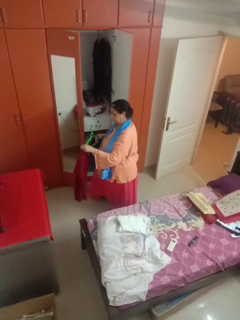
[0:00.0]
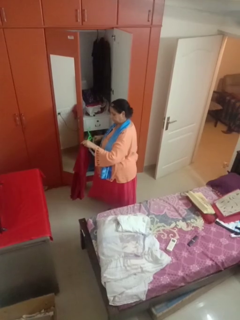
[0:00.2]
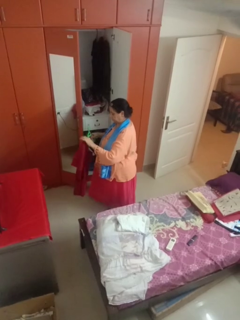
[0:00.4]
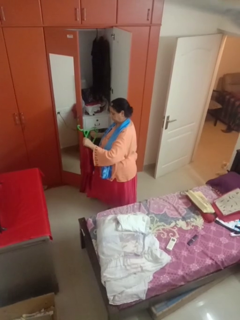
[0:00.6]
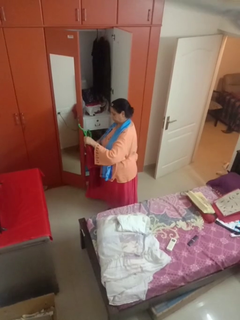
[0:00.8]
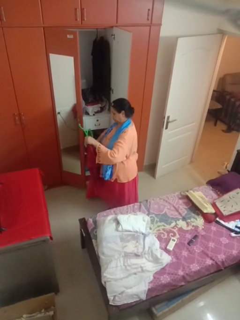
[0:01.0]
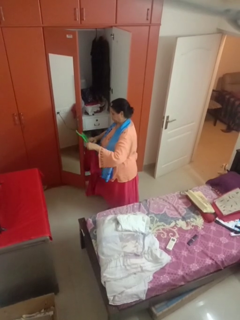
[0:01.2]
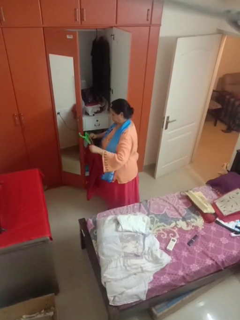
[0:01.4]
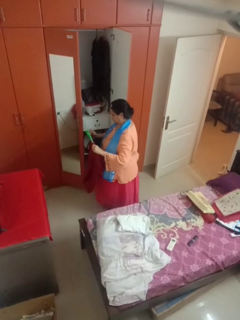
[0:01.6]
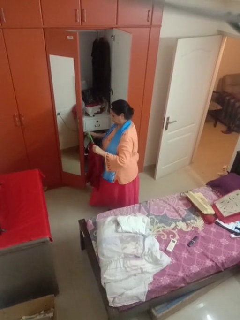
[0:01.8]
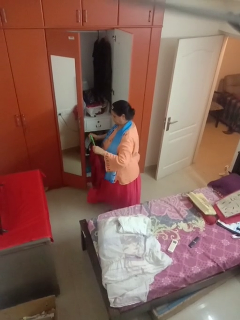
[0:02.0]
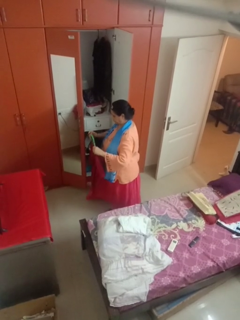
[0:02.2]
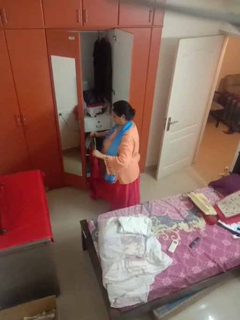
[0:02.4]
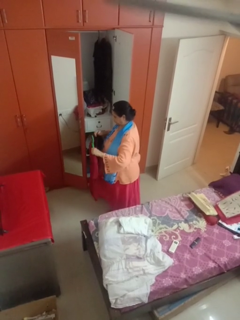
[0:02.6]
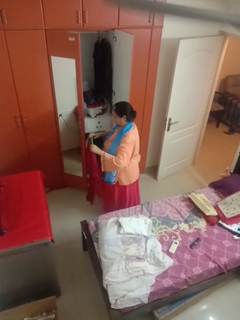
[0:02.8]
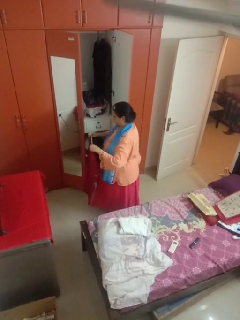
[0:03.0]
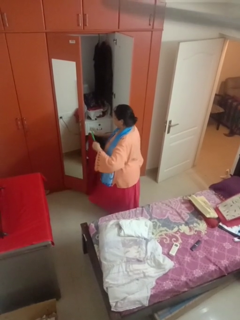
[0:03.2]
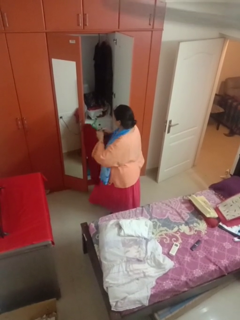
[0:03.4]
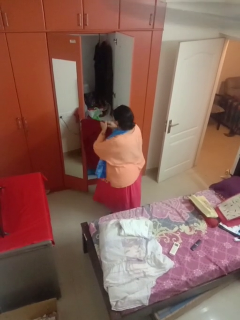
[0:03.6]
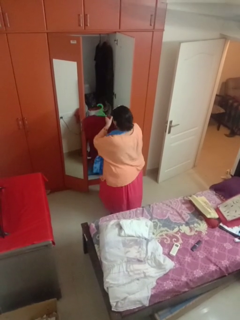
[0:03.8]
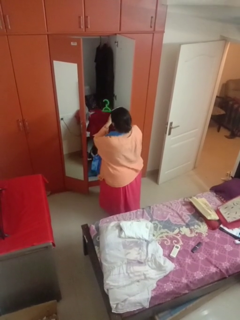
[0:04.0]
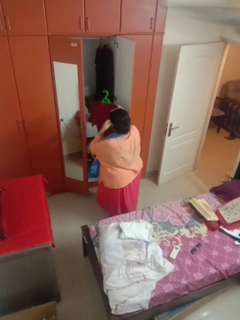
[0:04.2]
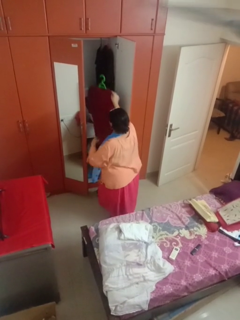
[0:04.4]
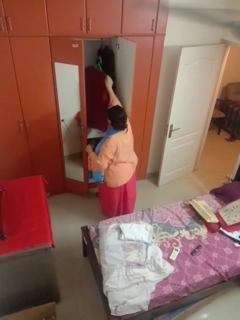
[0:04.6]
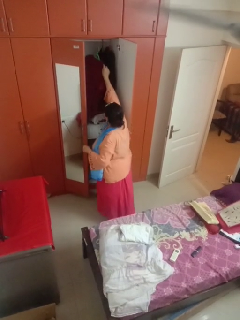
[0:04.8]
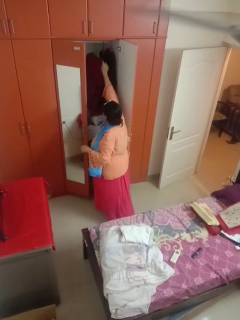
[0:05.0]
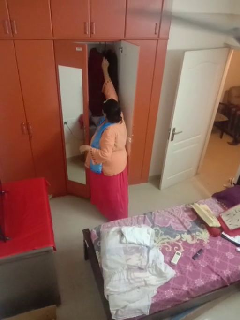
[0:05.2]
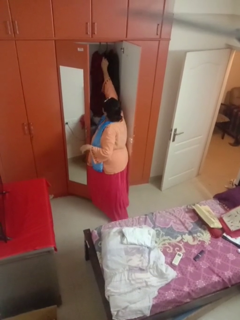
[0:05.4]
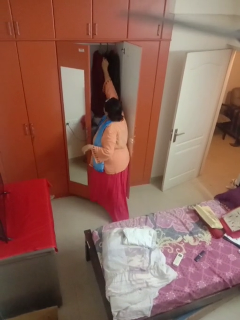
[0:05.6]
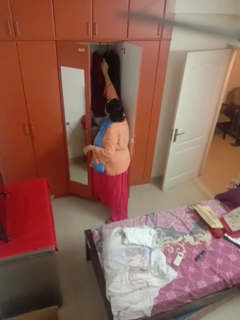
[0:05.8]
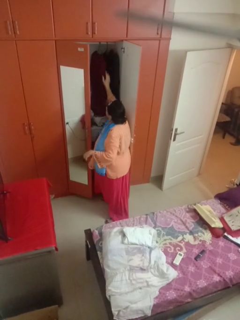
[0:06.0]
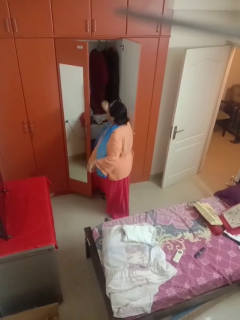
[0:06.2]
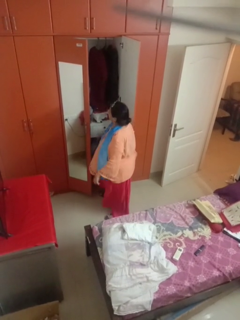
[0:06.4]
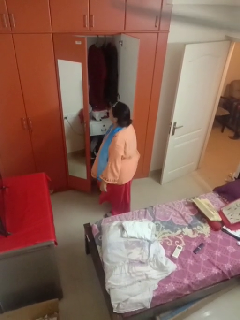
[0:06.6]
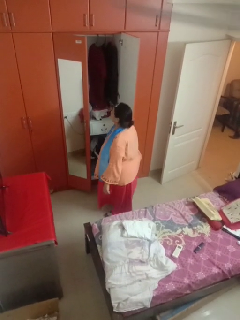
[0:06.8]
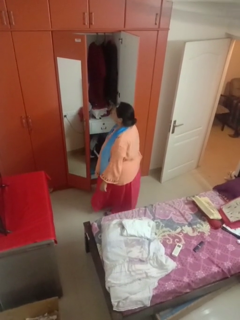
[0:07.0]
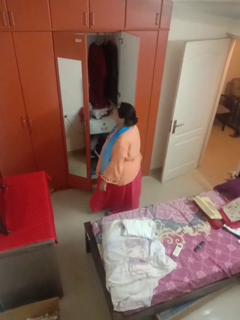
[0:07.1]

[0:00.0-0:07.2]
person puts clothes into closet

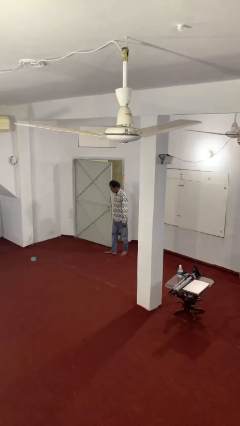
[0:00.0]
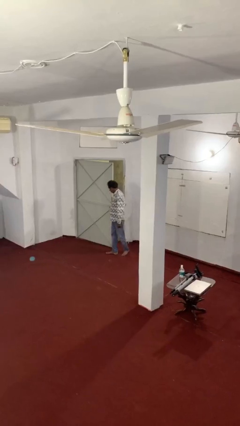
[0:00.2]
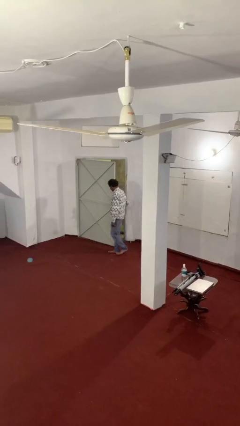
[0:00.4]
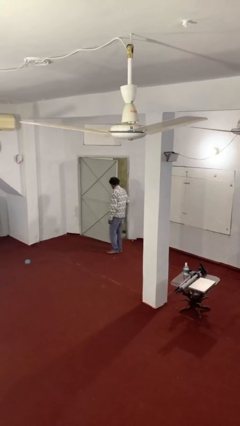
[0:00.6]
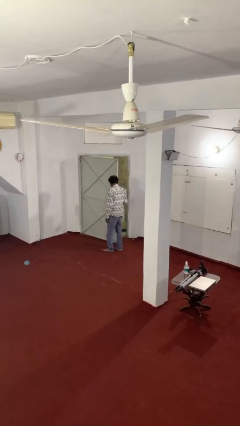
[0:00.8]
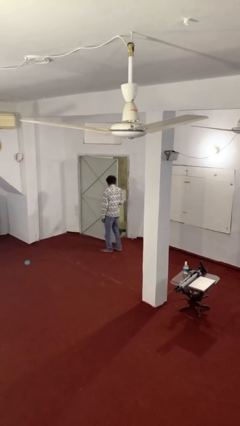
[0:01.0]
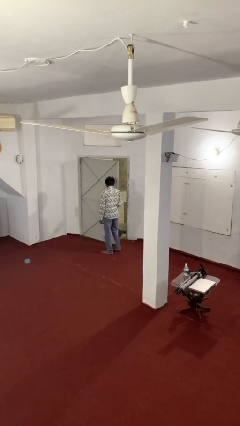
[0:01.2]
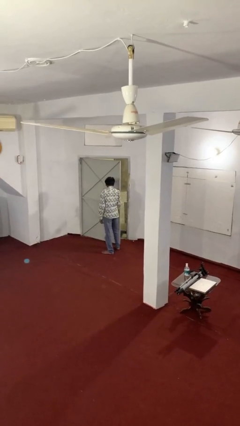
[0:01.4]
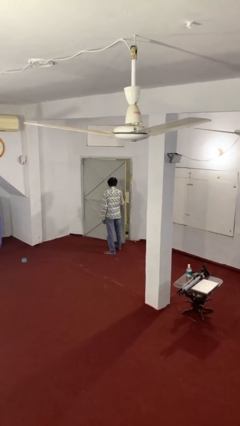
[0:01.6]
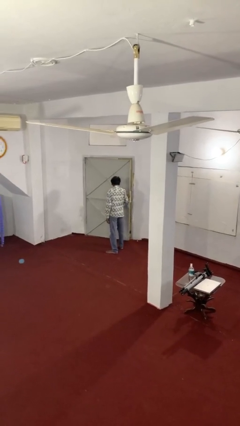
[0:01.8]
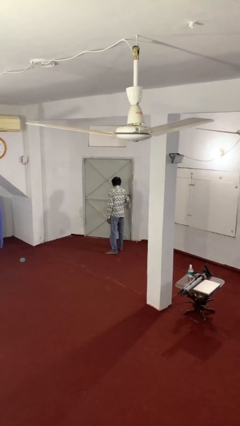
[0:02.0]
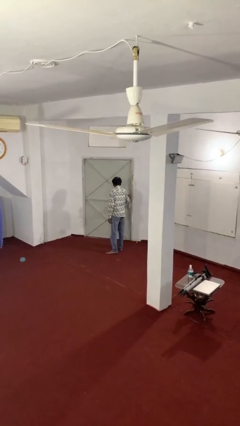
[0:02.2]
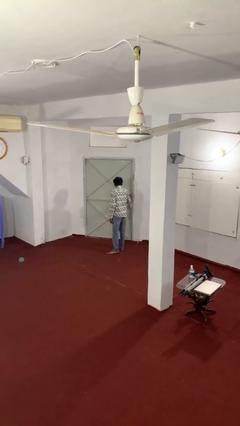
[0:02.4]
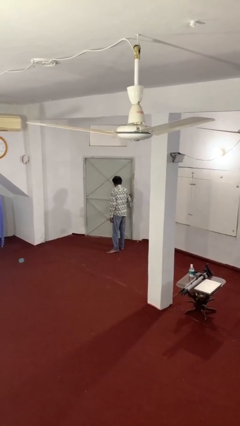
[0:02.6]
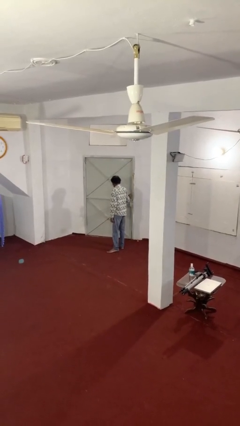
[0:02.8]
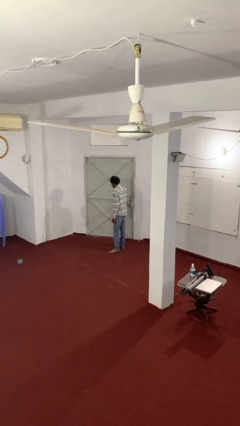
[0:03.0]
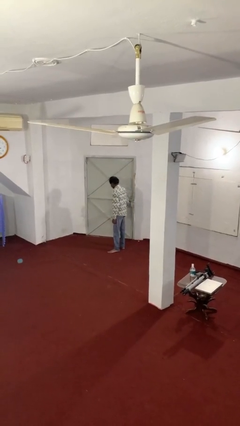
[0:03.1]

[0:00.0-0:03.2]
person closes facility door

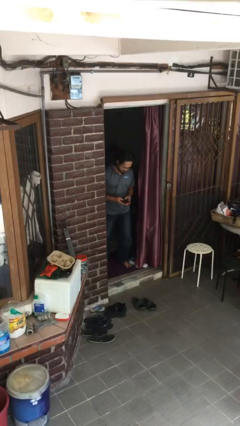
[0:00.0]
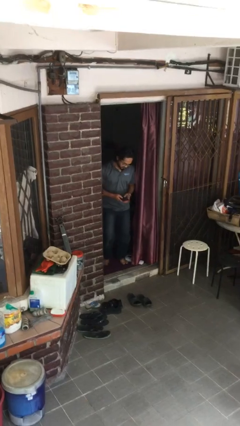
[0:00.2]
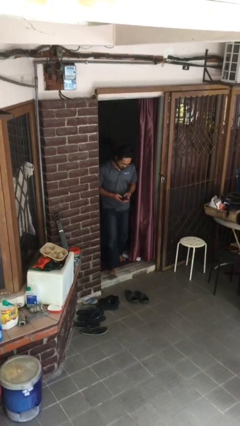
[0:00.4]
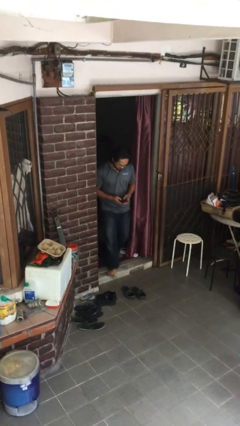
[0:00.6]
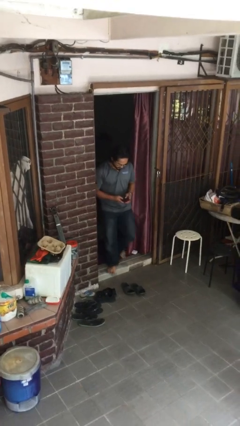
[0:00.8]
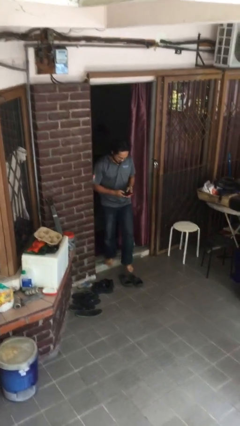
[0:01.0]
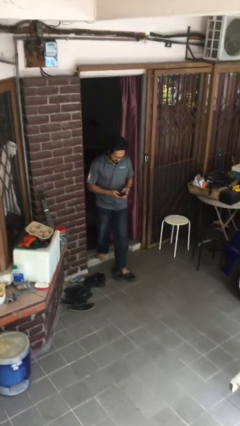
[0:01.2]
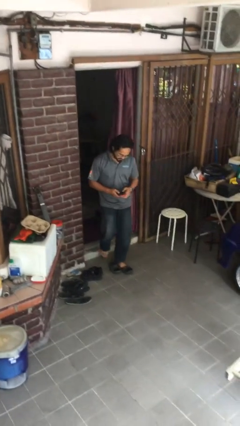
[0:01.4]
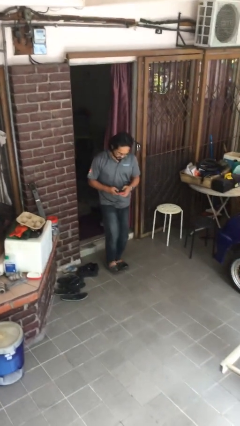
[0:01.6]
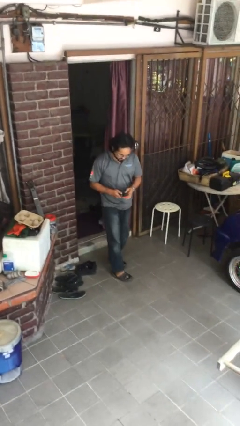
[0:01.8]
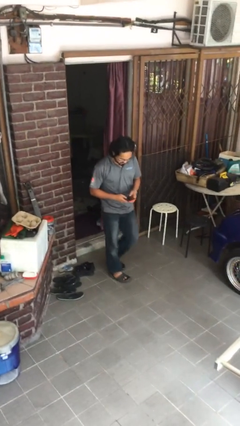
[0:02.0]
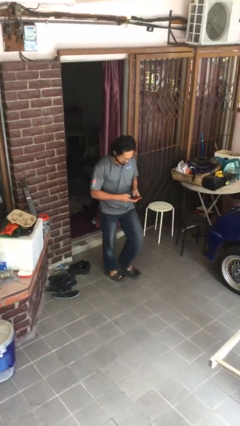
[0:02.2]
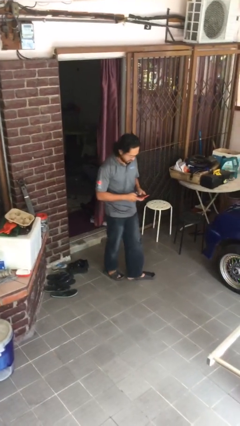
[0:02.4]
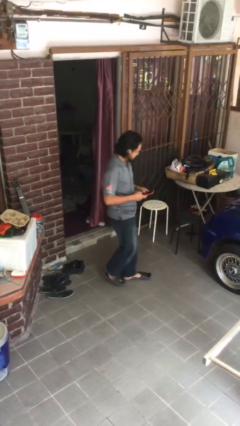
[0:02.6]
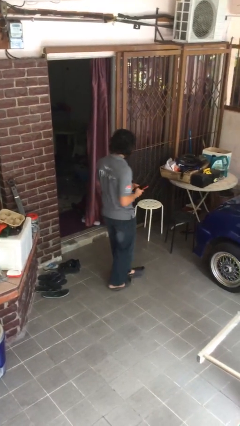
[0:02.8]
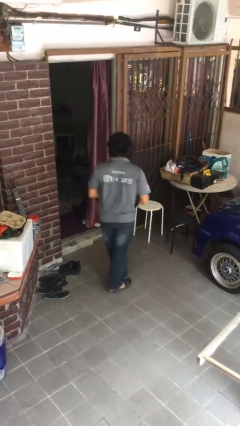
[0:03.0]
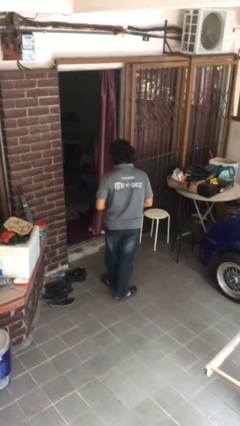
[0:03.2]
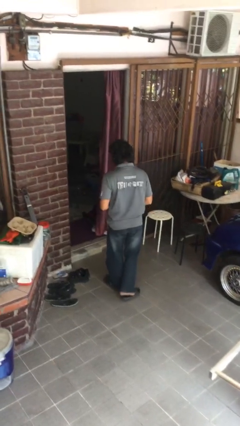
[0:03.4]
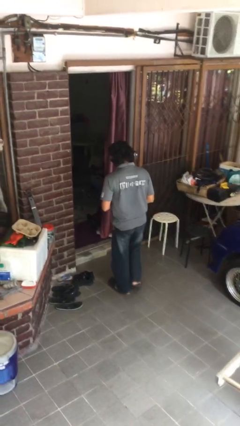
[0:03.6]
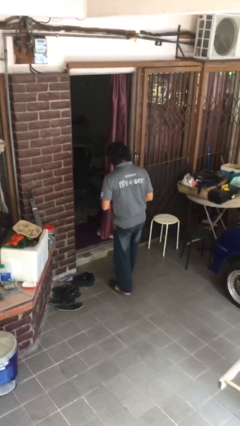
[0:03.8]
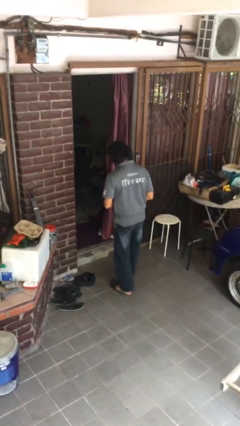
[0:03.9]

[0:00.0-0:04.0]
person enters scene through structure

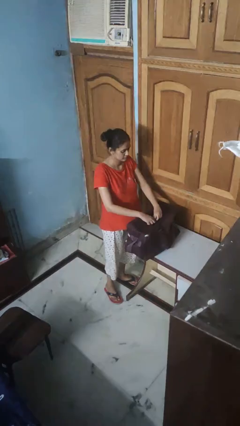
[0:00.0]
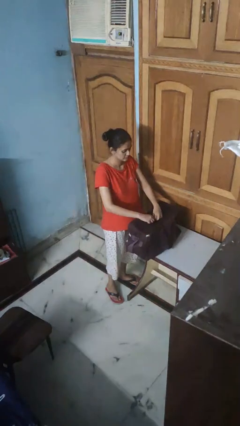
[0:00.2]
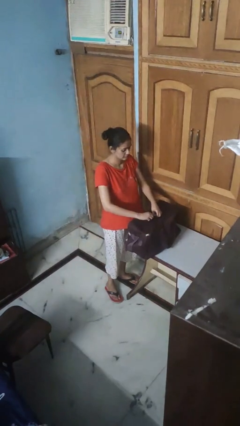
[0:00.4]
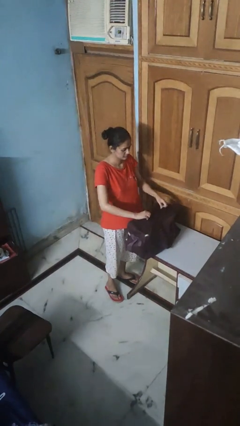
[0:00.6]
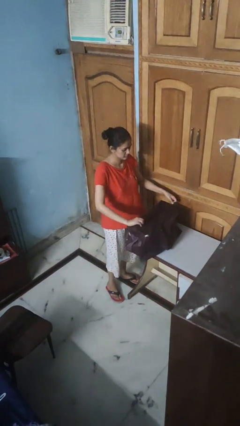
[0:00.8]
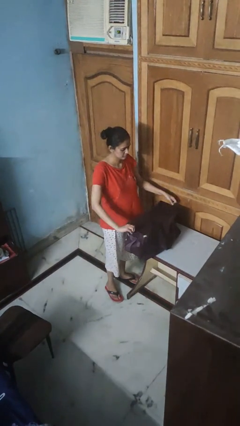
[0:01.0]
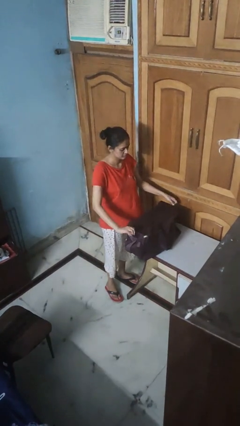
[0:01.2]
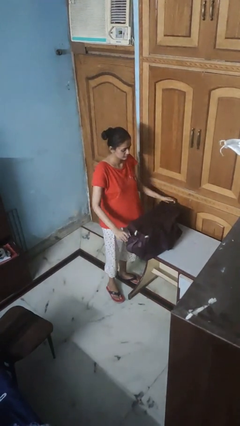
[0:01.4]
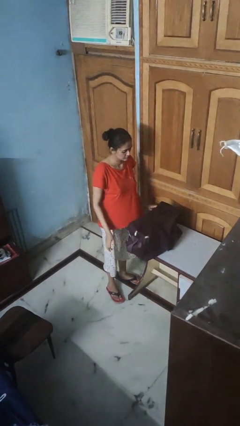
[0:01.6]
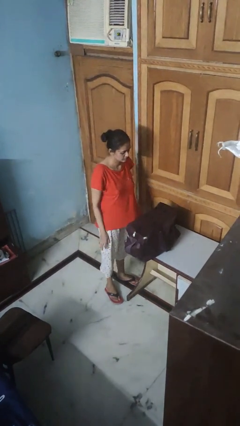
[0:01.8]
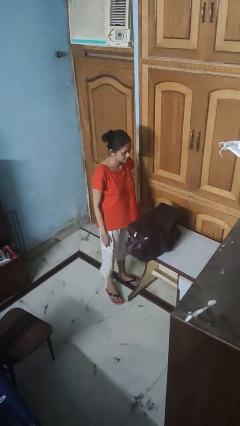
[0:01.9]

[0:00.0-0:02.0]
person opens suitcase

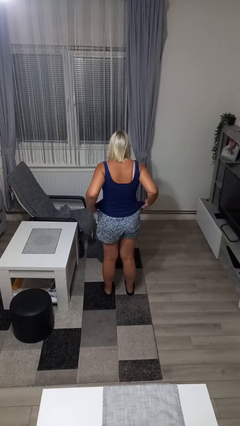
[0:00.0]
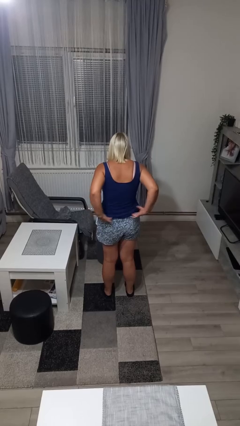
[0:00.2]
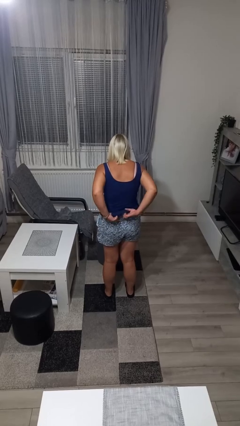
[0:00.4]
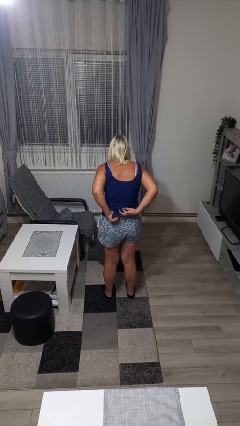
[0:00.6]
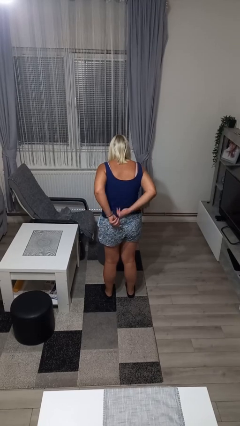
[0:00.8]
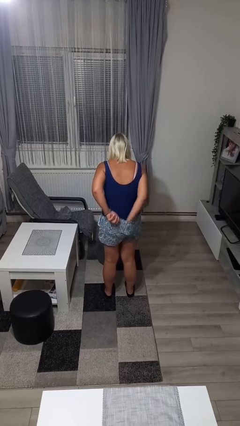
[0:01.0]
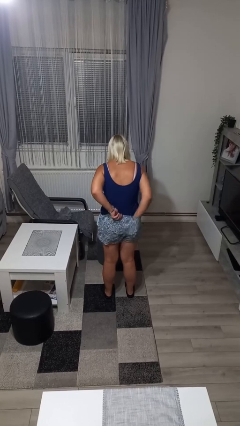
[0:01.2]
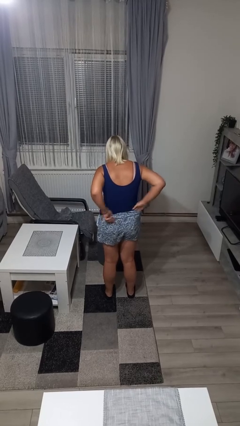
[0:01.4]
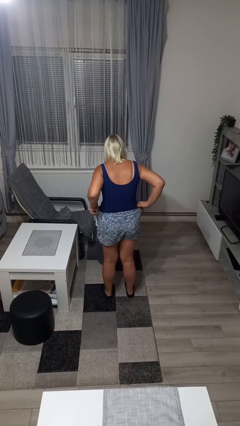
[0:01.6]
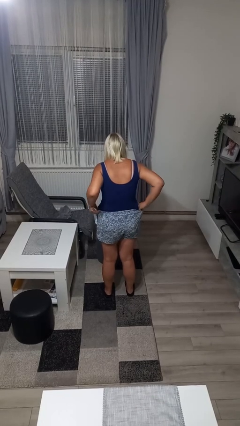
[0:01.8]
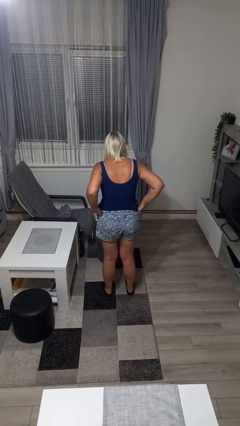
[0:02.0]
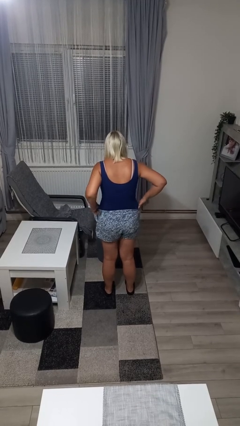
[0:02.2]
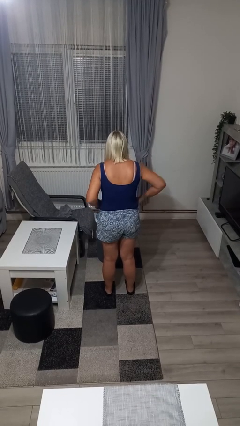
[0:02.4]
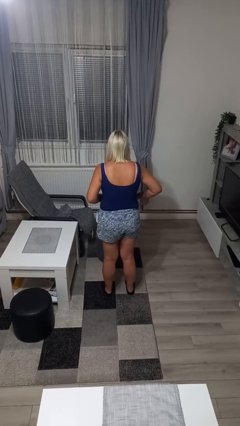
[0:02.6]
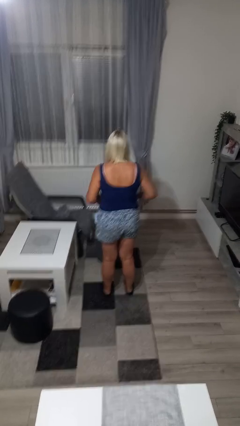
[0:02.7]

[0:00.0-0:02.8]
person tucks in shirt
